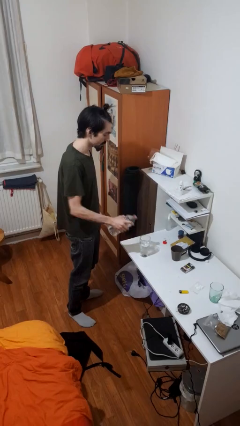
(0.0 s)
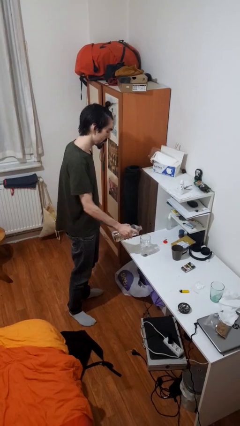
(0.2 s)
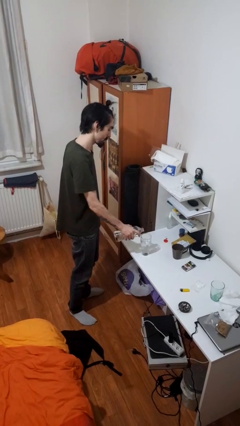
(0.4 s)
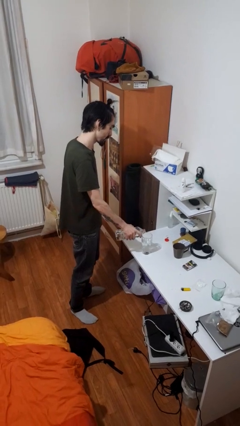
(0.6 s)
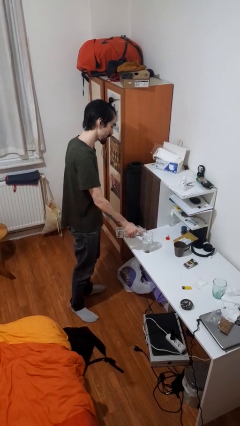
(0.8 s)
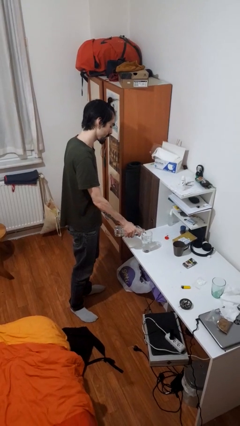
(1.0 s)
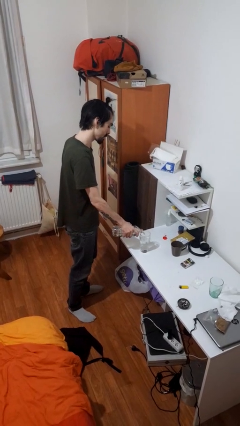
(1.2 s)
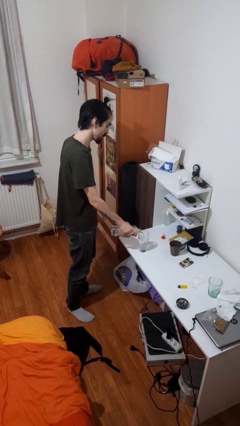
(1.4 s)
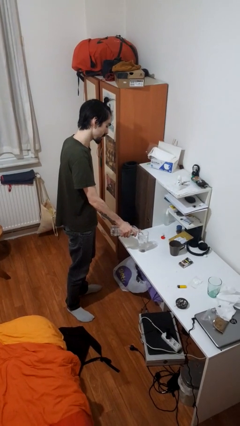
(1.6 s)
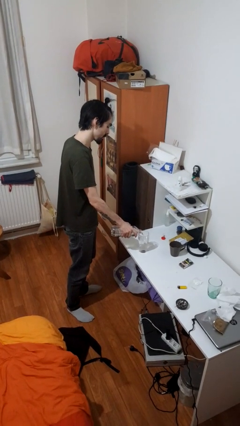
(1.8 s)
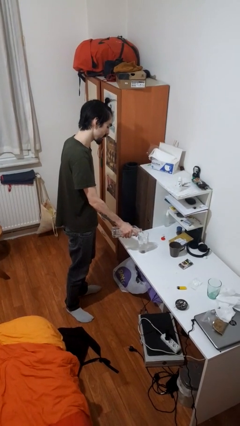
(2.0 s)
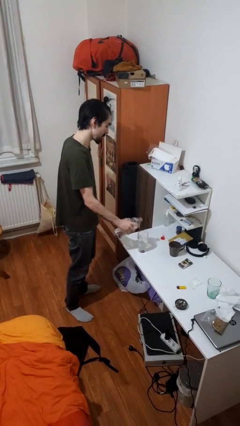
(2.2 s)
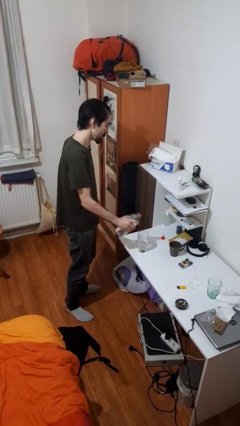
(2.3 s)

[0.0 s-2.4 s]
person pours liquid into cup

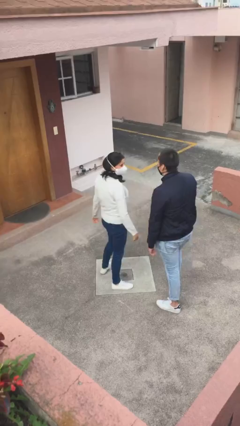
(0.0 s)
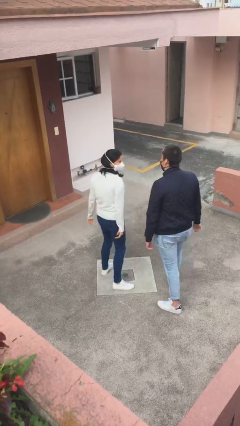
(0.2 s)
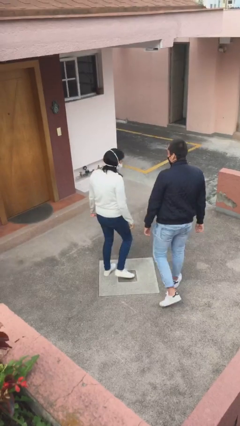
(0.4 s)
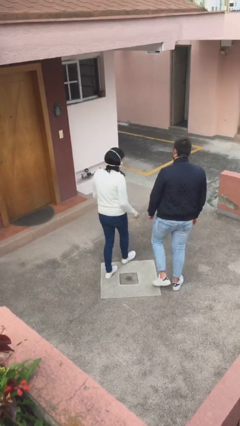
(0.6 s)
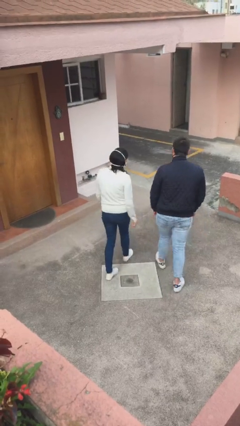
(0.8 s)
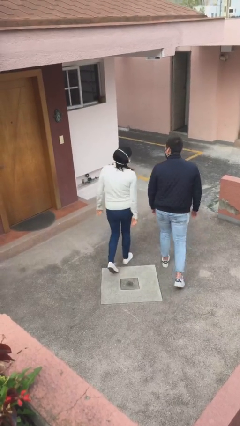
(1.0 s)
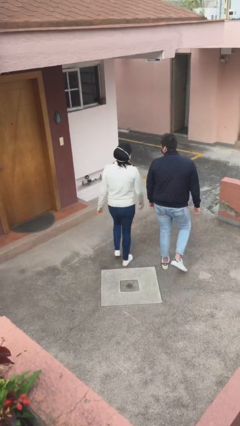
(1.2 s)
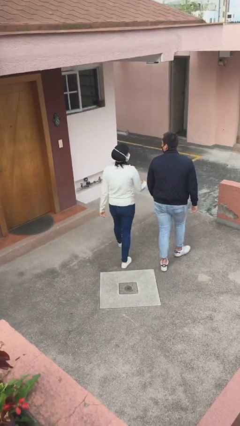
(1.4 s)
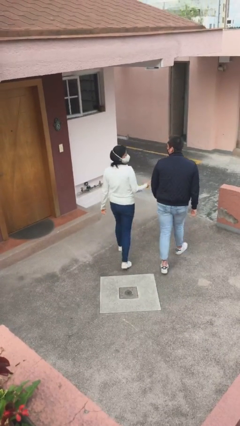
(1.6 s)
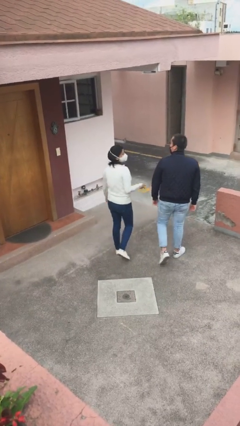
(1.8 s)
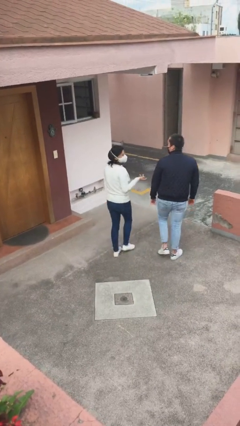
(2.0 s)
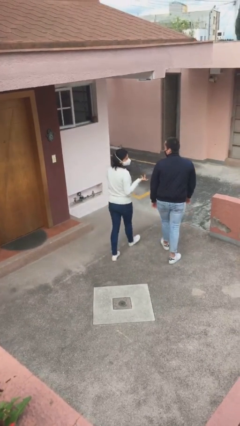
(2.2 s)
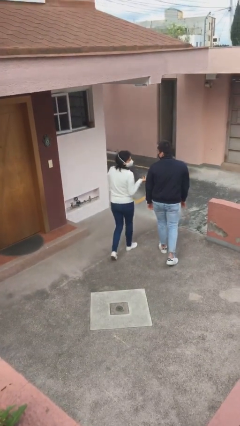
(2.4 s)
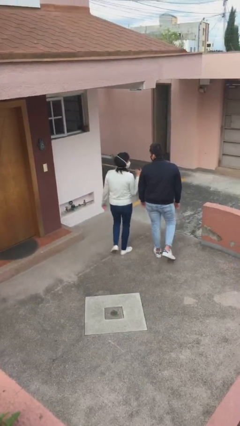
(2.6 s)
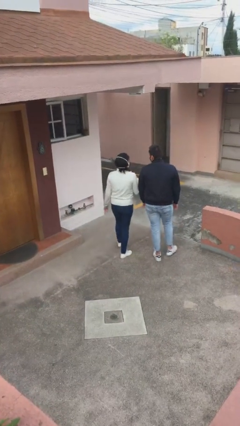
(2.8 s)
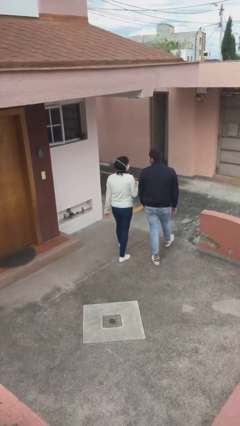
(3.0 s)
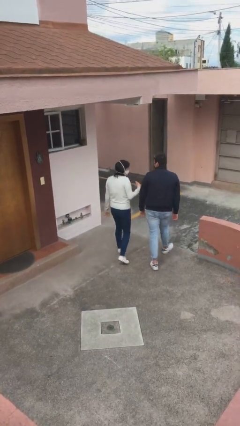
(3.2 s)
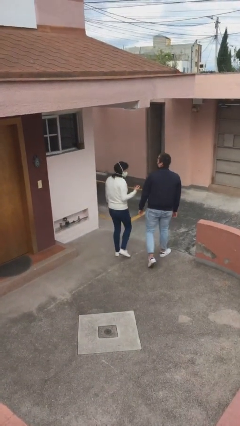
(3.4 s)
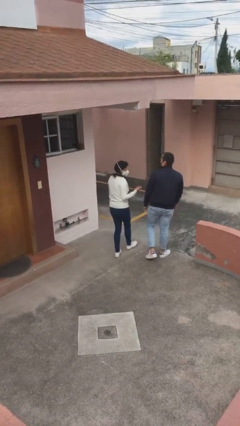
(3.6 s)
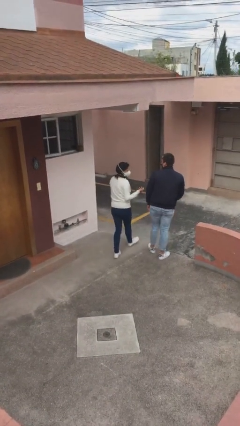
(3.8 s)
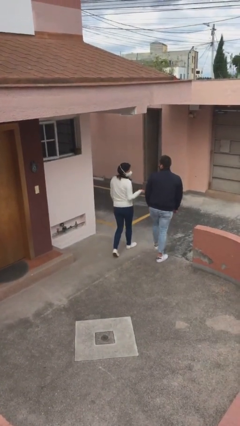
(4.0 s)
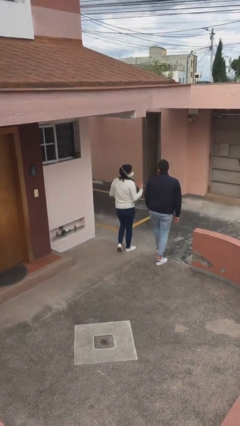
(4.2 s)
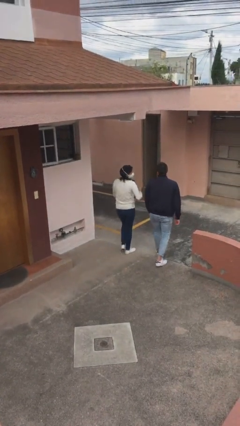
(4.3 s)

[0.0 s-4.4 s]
person talks to person

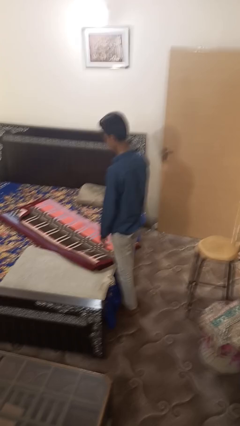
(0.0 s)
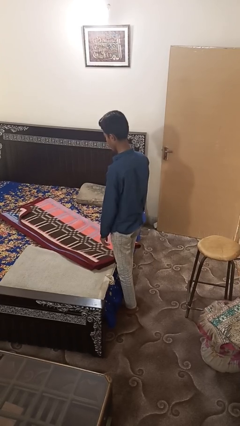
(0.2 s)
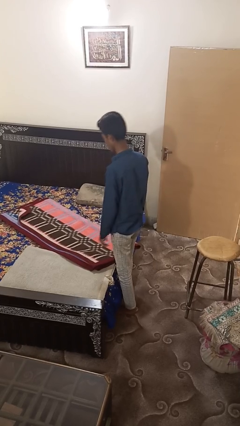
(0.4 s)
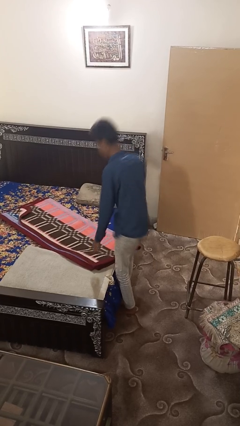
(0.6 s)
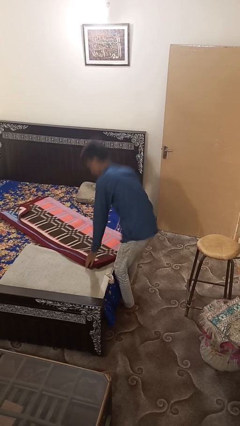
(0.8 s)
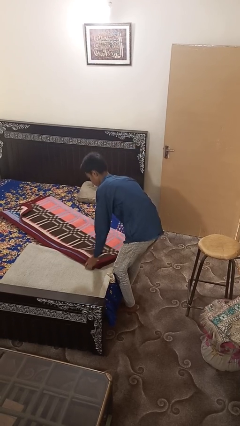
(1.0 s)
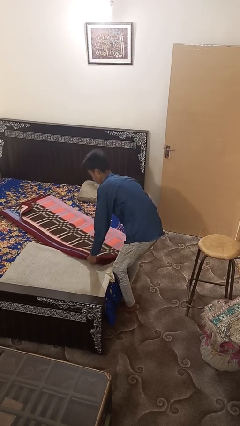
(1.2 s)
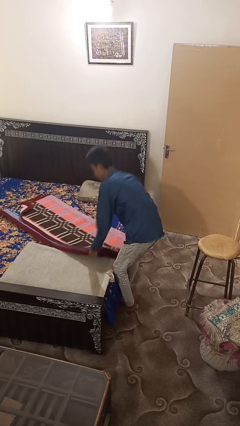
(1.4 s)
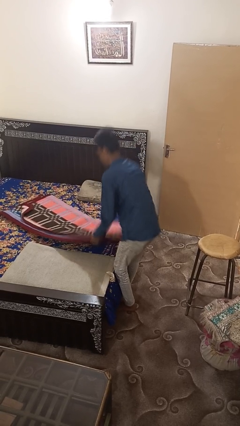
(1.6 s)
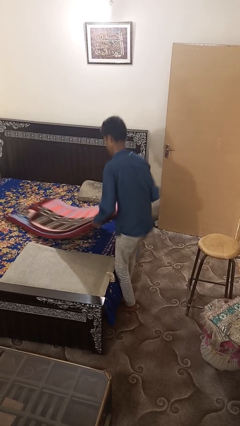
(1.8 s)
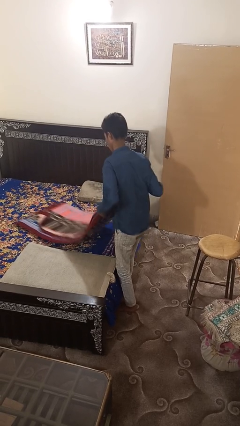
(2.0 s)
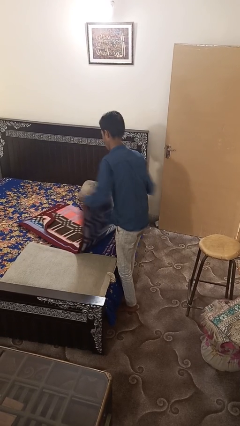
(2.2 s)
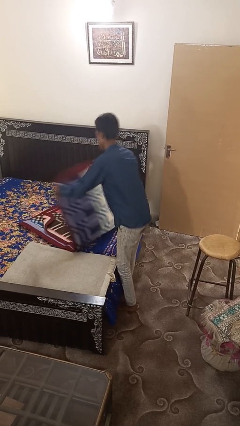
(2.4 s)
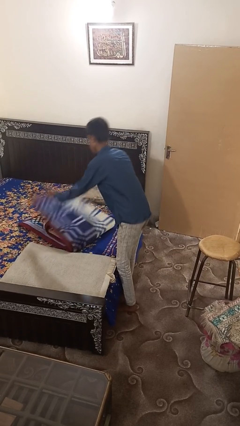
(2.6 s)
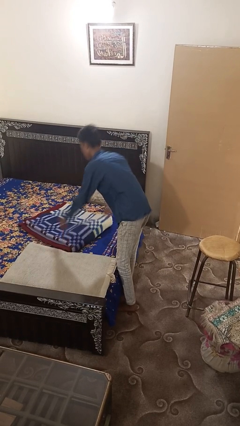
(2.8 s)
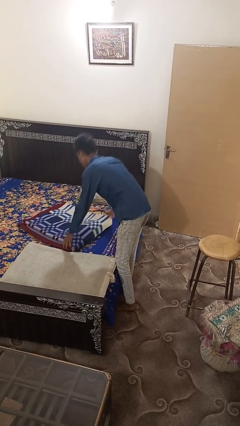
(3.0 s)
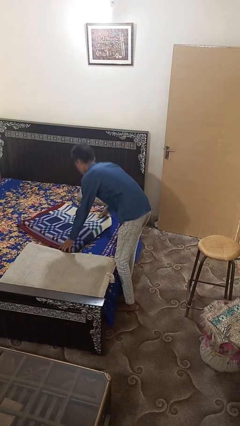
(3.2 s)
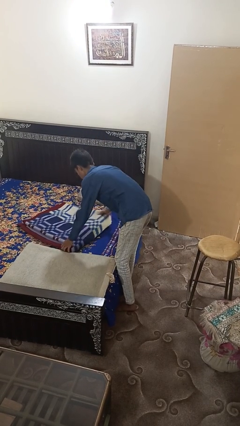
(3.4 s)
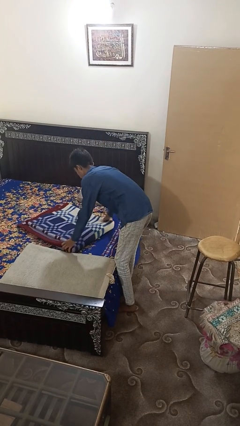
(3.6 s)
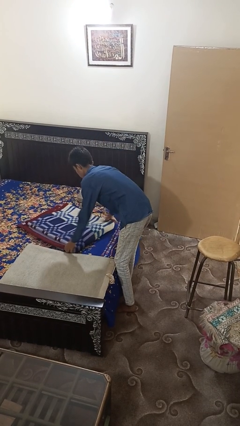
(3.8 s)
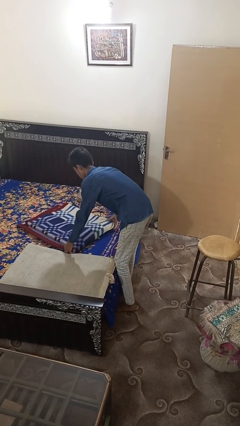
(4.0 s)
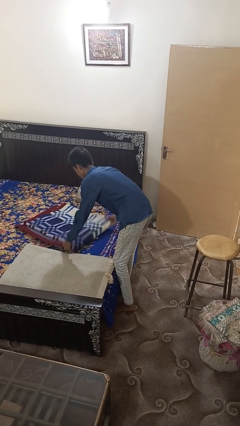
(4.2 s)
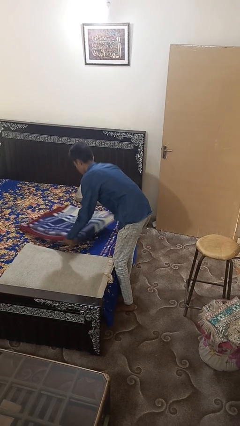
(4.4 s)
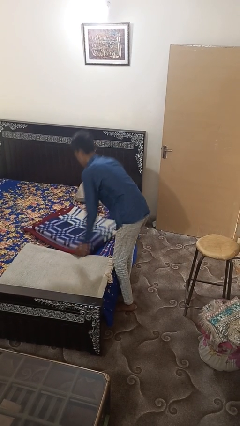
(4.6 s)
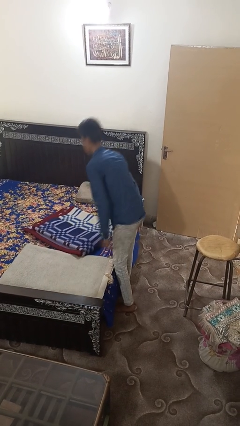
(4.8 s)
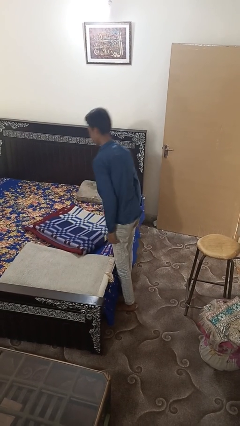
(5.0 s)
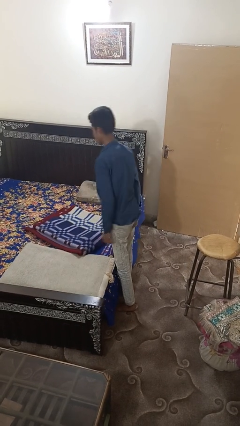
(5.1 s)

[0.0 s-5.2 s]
person folds blanket

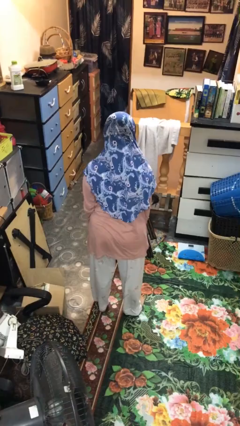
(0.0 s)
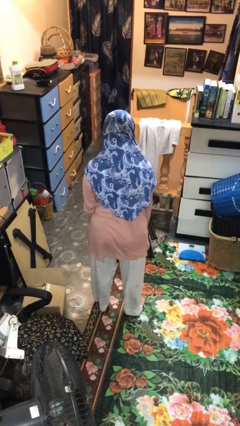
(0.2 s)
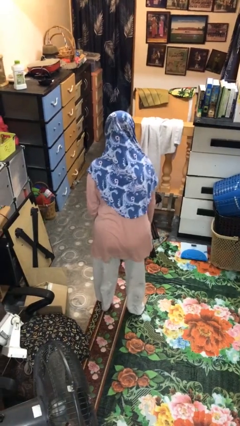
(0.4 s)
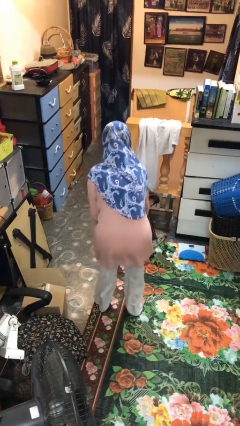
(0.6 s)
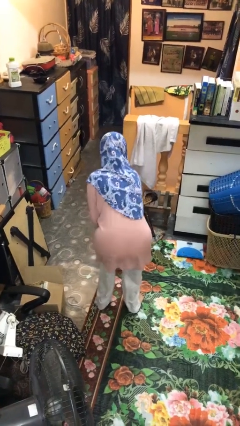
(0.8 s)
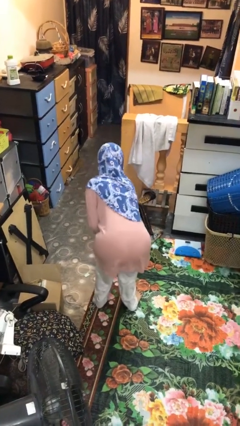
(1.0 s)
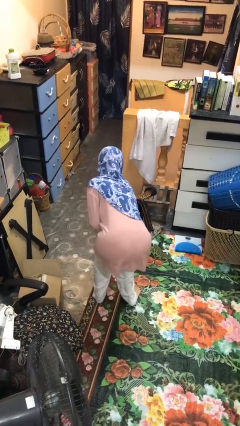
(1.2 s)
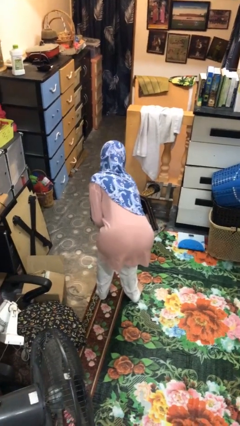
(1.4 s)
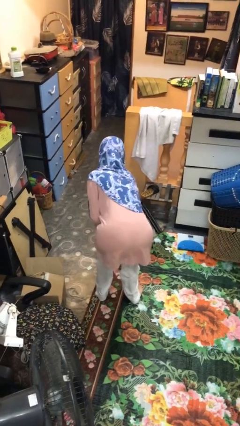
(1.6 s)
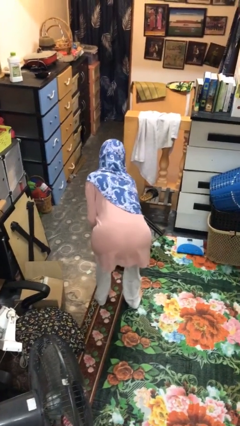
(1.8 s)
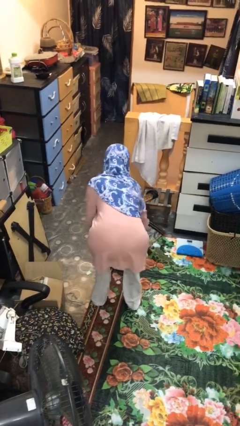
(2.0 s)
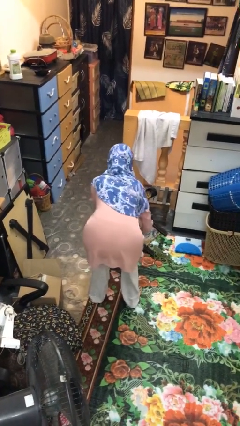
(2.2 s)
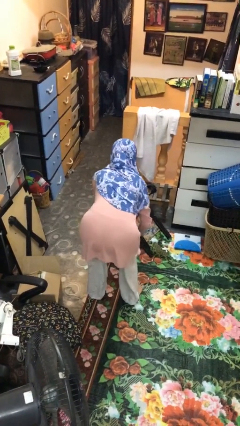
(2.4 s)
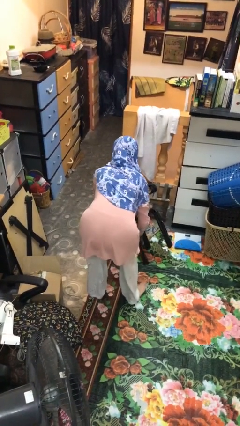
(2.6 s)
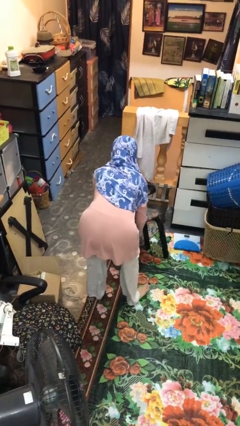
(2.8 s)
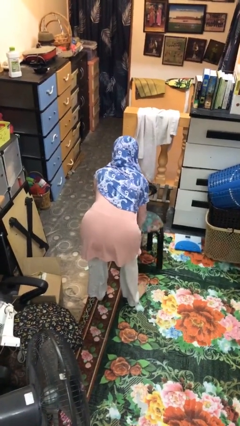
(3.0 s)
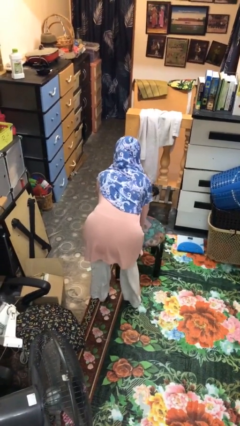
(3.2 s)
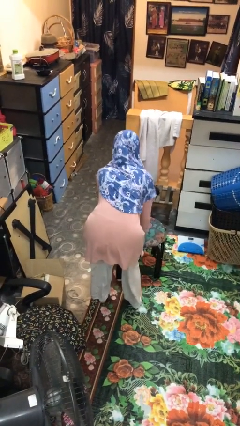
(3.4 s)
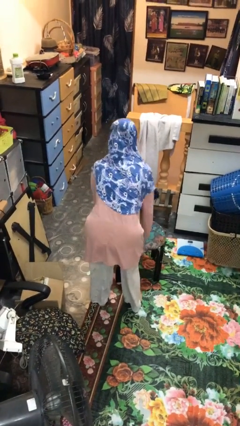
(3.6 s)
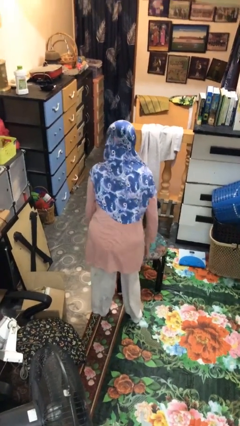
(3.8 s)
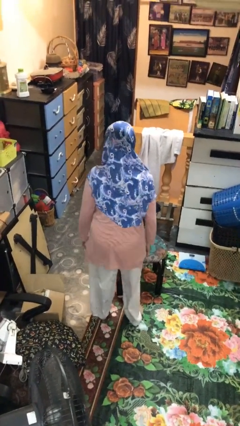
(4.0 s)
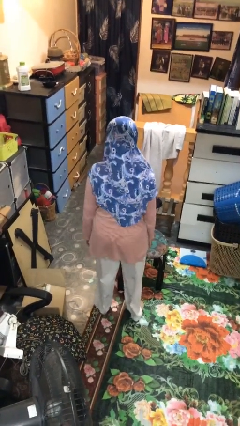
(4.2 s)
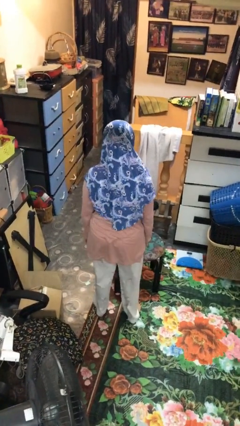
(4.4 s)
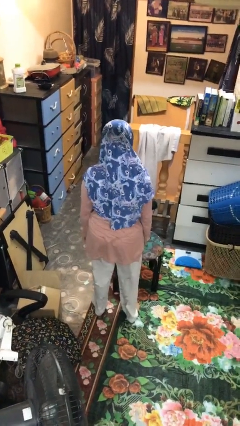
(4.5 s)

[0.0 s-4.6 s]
person sets upright furniture

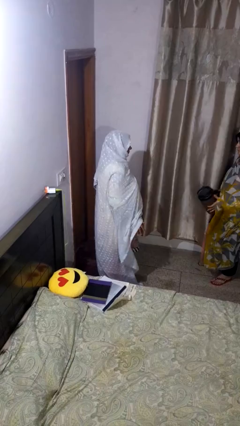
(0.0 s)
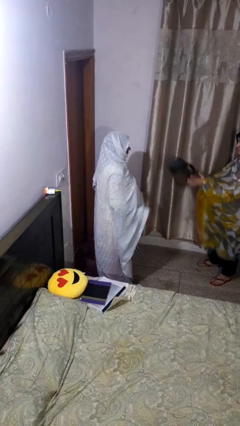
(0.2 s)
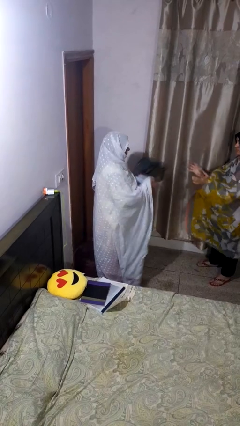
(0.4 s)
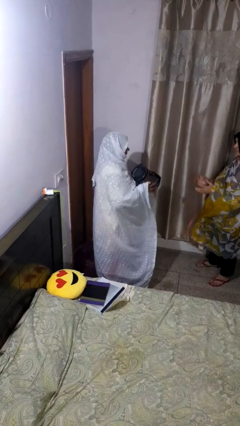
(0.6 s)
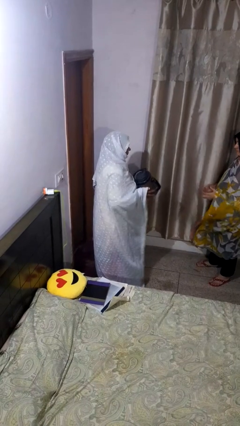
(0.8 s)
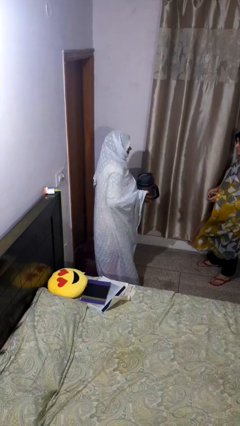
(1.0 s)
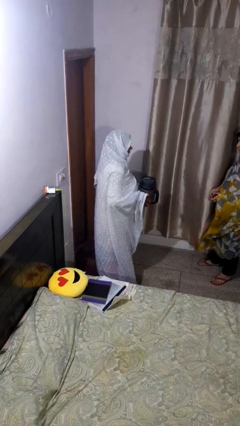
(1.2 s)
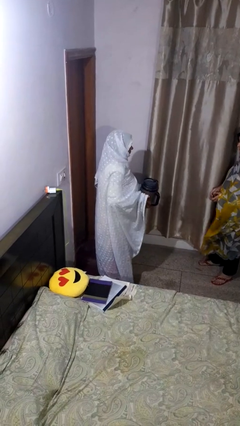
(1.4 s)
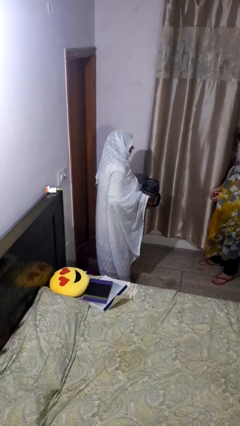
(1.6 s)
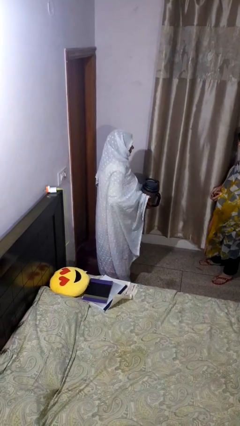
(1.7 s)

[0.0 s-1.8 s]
person catches object from person
